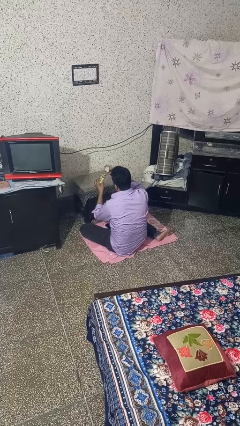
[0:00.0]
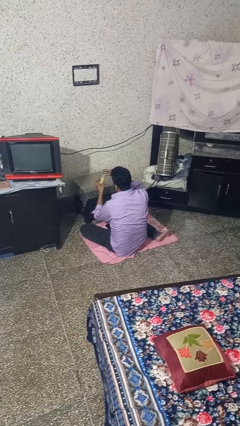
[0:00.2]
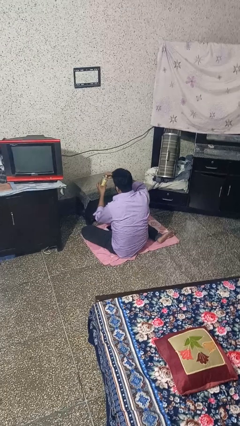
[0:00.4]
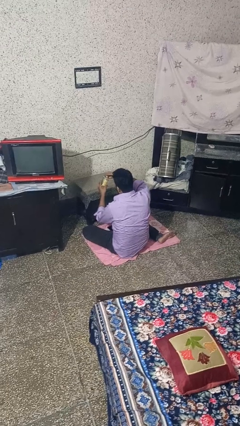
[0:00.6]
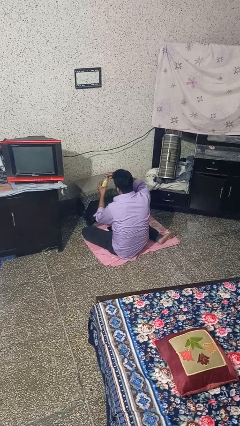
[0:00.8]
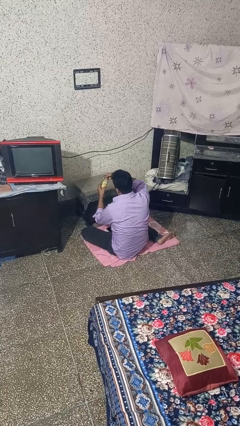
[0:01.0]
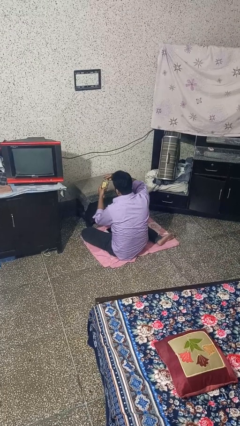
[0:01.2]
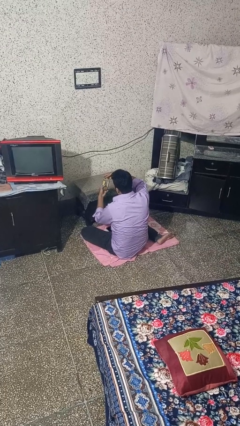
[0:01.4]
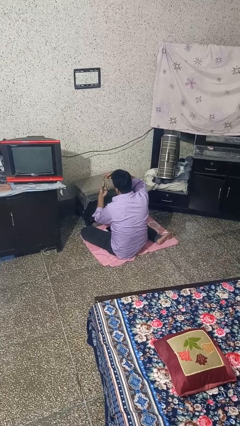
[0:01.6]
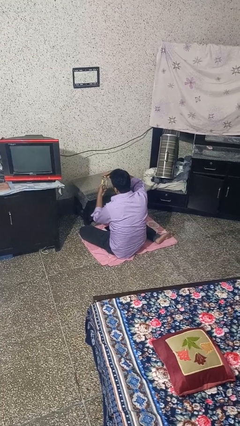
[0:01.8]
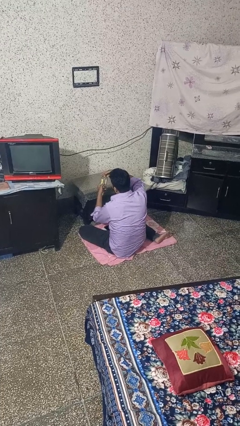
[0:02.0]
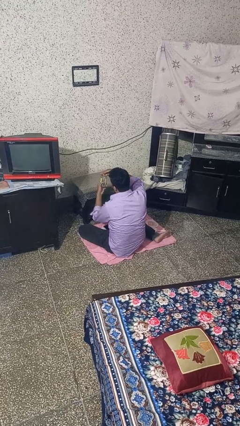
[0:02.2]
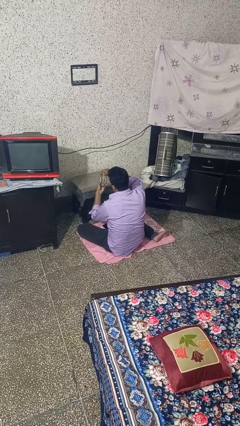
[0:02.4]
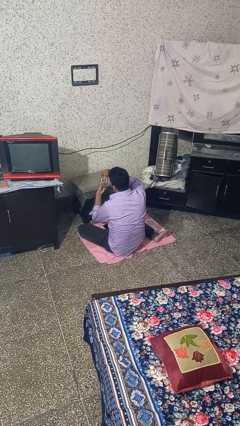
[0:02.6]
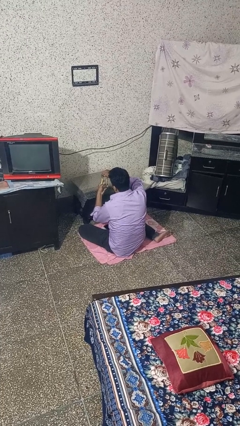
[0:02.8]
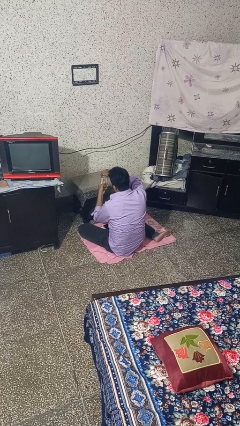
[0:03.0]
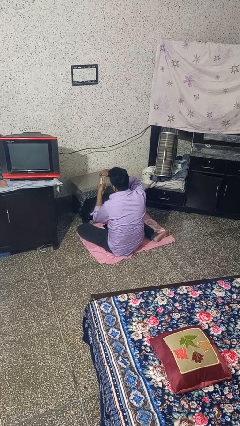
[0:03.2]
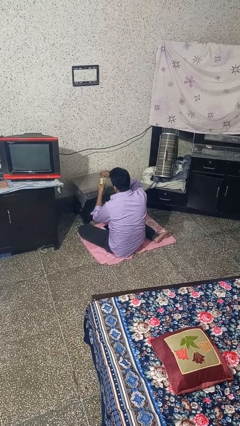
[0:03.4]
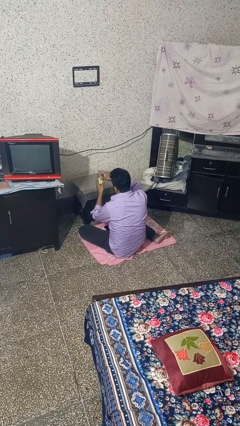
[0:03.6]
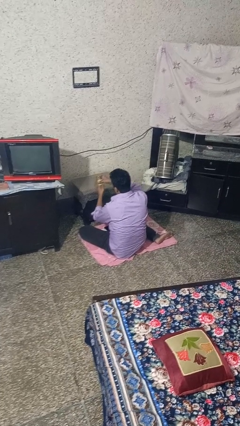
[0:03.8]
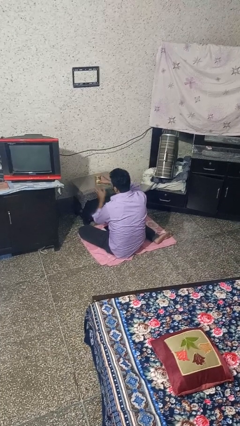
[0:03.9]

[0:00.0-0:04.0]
person closes jar

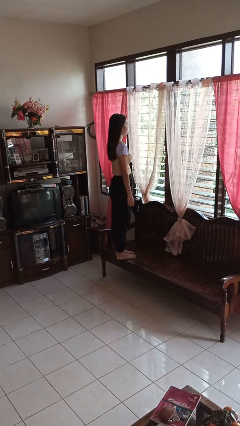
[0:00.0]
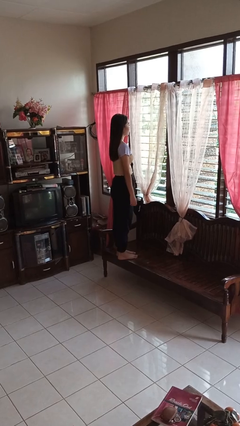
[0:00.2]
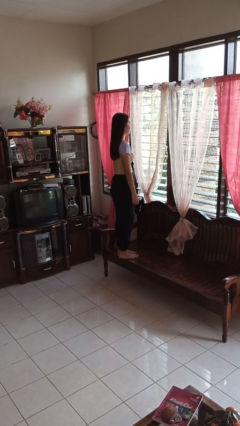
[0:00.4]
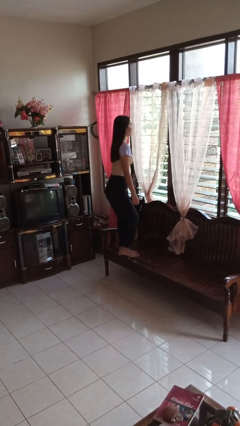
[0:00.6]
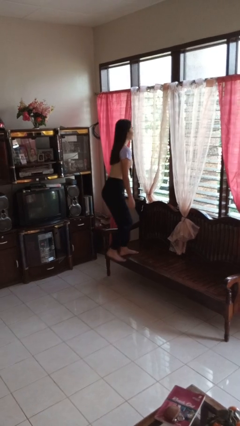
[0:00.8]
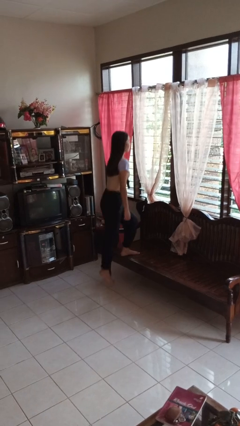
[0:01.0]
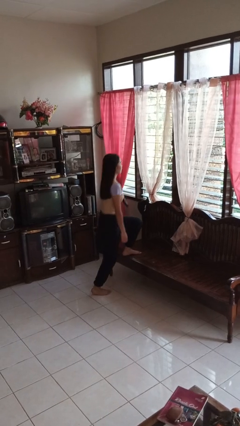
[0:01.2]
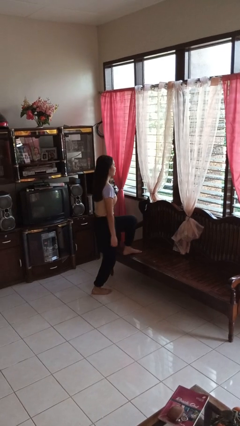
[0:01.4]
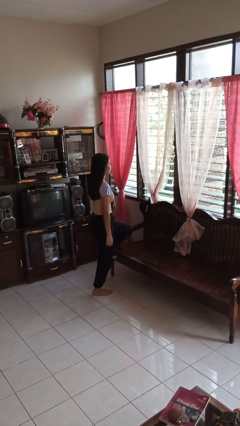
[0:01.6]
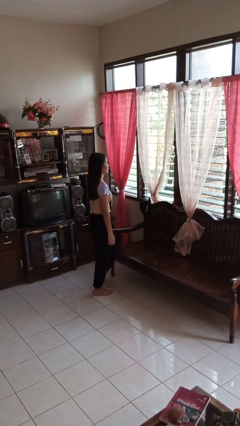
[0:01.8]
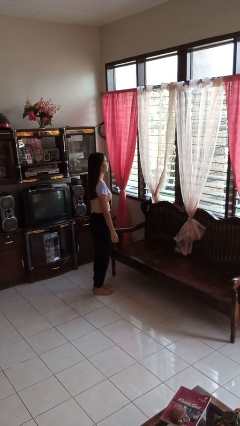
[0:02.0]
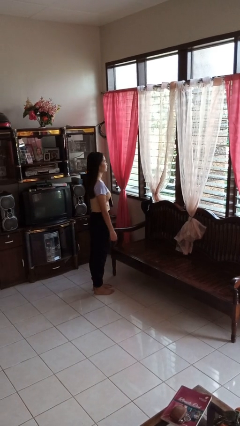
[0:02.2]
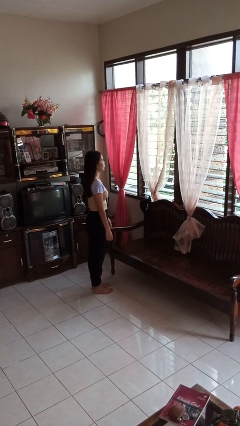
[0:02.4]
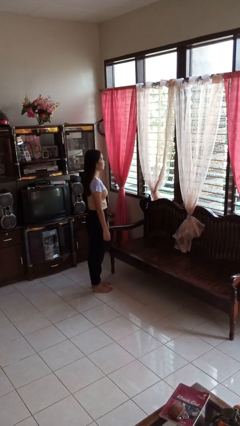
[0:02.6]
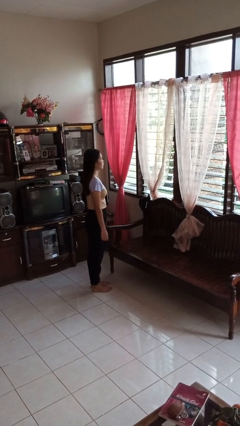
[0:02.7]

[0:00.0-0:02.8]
person climbs off couch

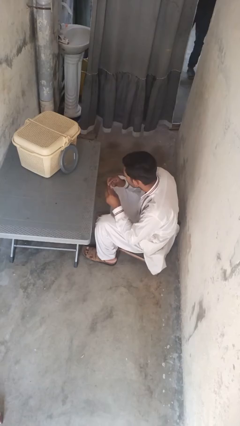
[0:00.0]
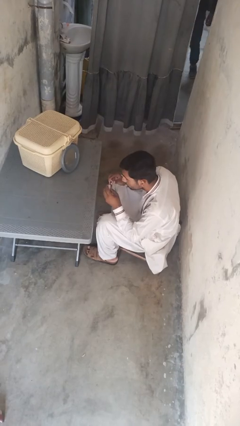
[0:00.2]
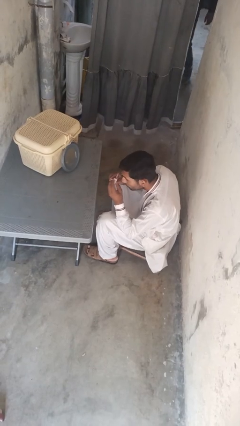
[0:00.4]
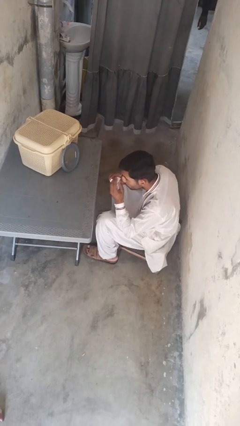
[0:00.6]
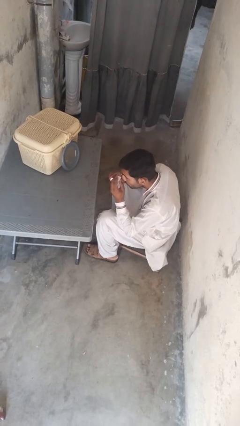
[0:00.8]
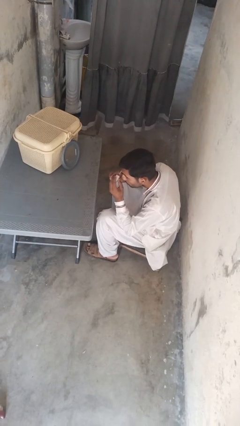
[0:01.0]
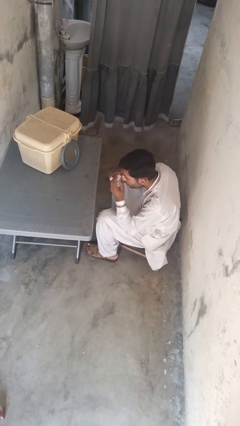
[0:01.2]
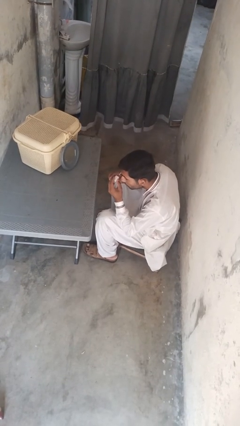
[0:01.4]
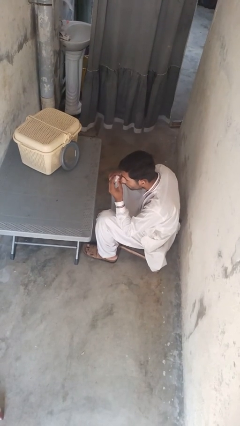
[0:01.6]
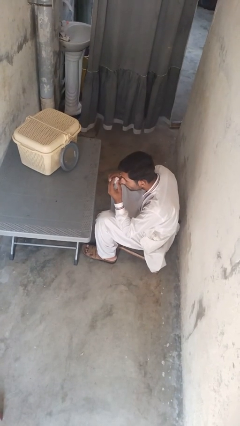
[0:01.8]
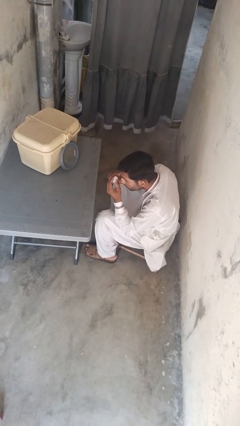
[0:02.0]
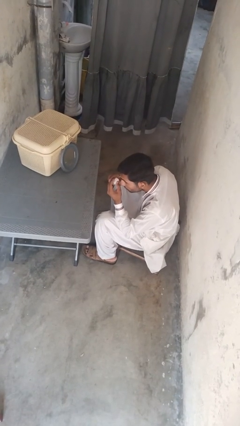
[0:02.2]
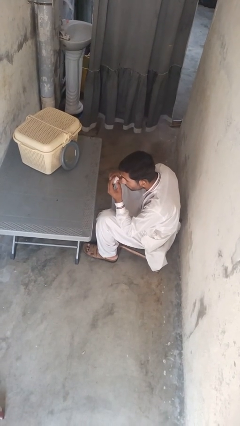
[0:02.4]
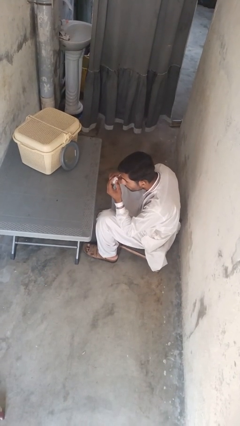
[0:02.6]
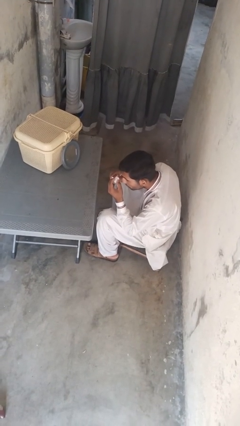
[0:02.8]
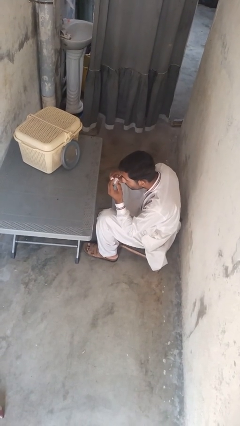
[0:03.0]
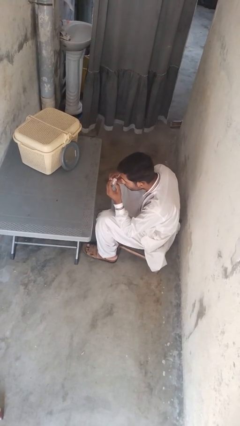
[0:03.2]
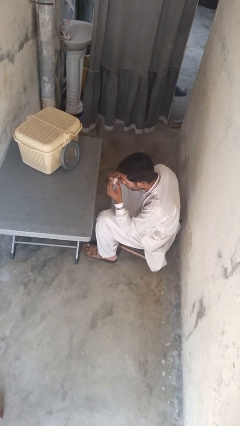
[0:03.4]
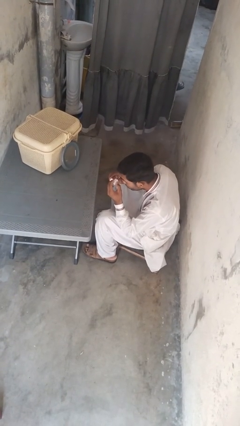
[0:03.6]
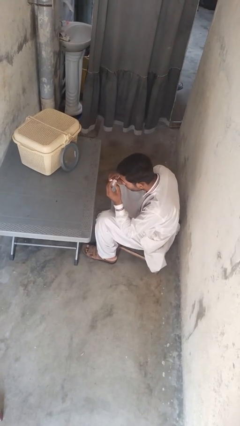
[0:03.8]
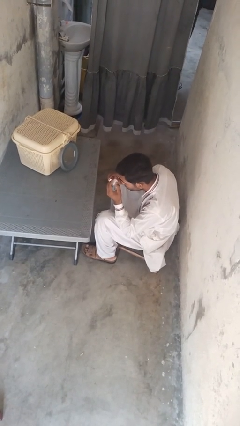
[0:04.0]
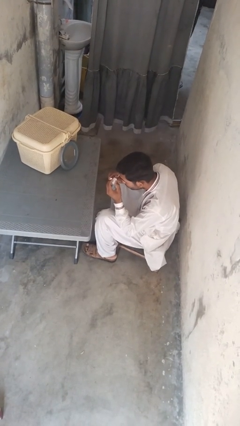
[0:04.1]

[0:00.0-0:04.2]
person applies eye makeup

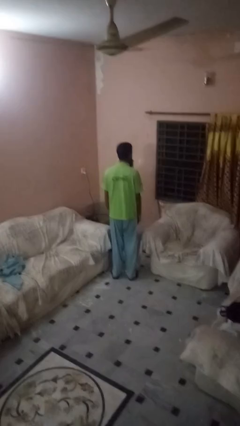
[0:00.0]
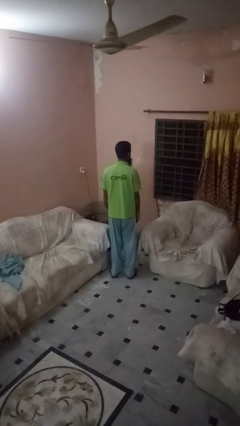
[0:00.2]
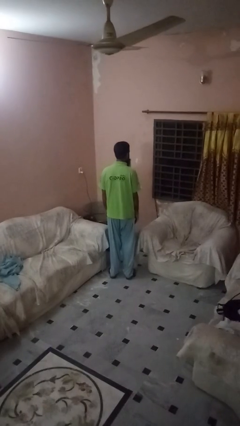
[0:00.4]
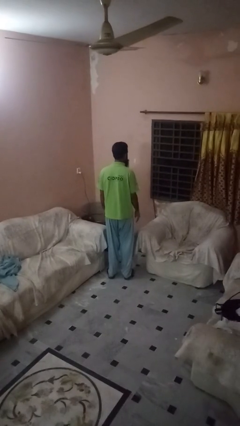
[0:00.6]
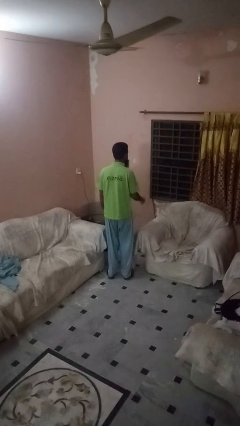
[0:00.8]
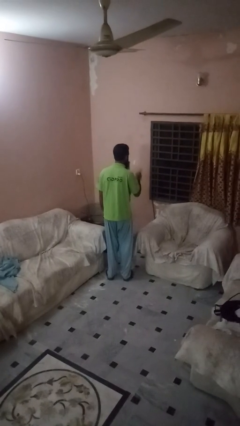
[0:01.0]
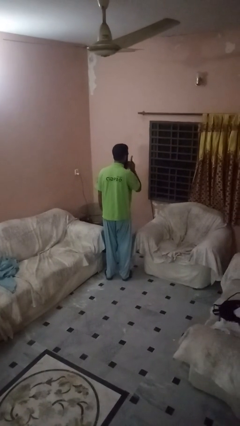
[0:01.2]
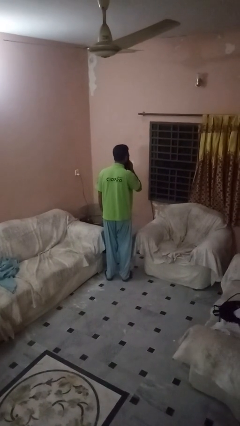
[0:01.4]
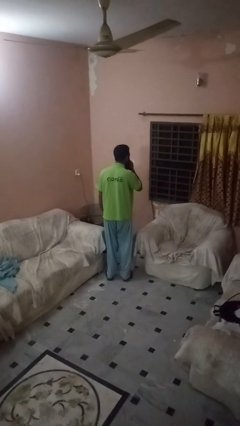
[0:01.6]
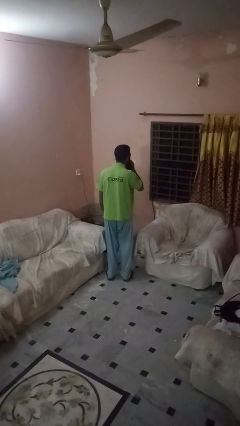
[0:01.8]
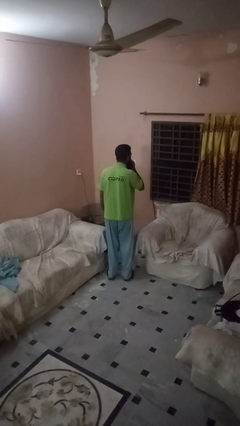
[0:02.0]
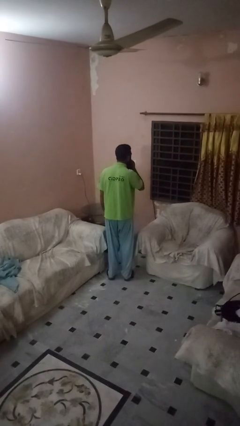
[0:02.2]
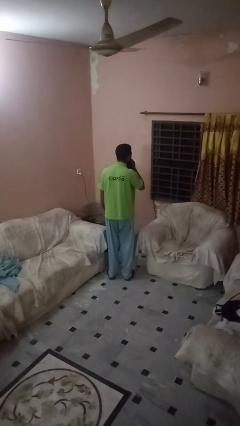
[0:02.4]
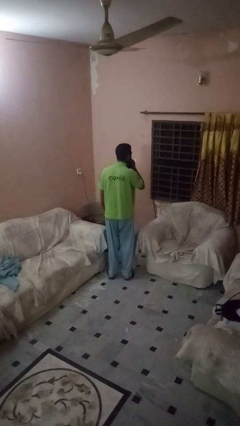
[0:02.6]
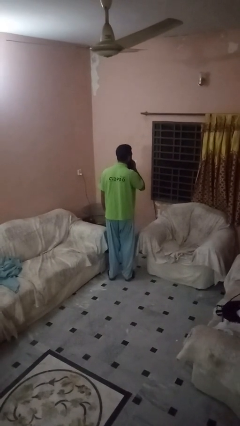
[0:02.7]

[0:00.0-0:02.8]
person gestures be quiet

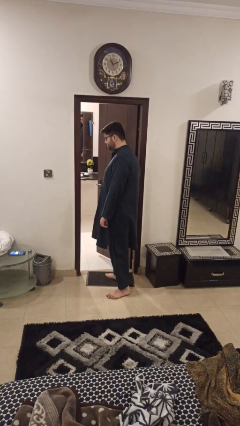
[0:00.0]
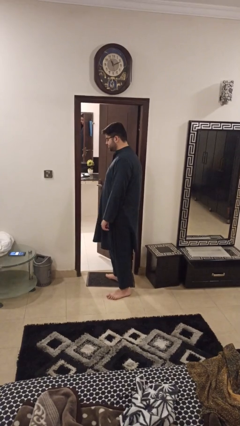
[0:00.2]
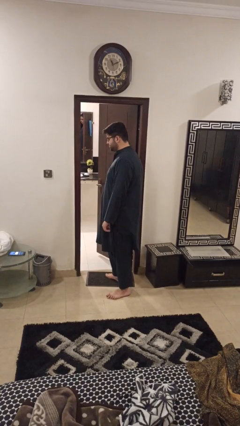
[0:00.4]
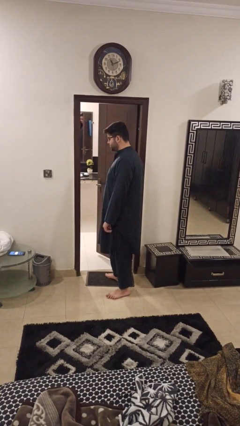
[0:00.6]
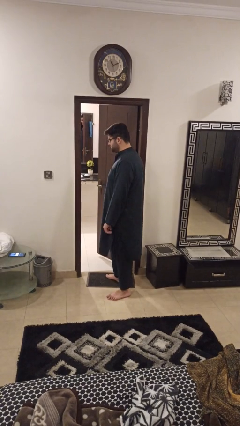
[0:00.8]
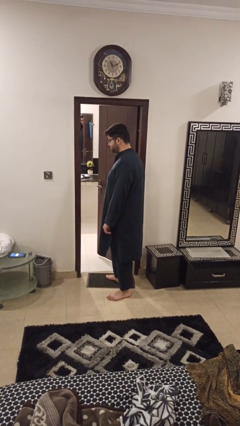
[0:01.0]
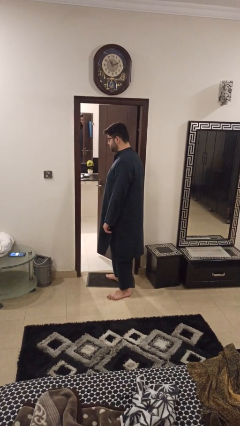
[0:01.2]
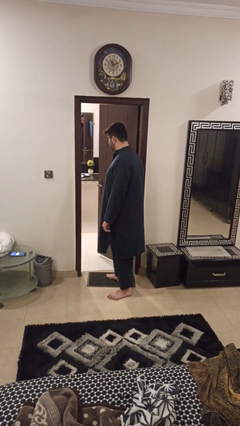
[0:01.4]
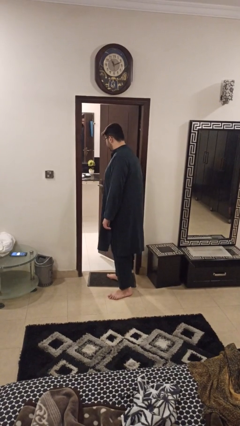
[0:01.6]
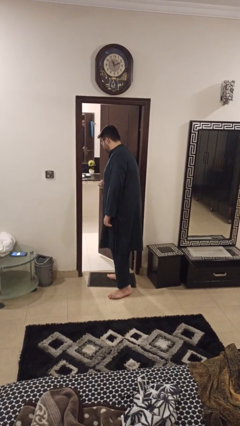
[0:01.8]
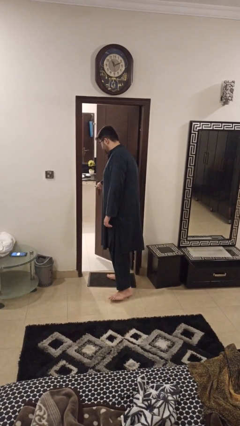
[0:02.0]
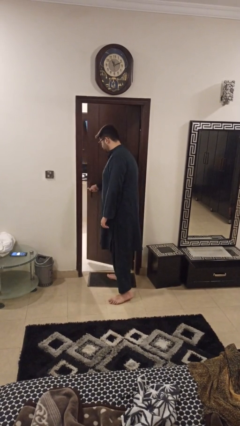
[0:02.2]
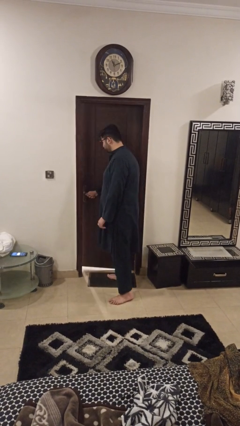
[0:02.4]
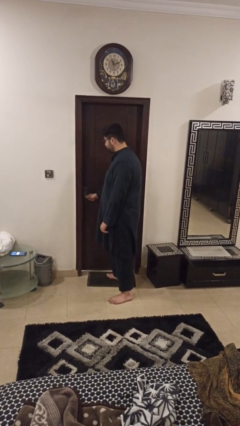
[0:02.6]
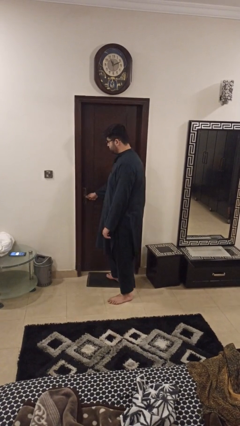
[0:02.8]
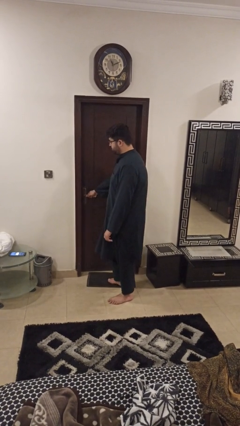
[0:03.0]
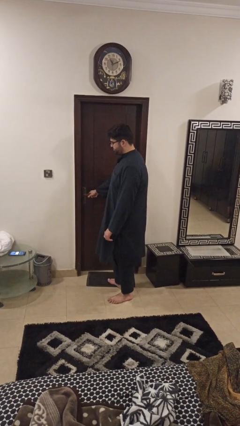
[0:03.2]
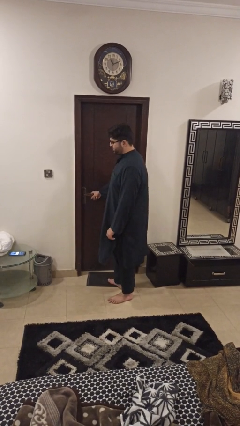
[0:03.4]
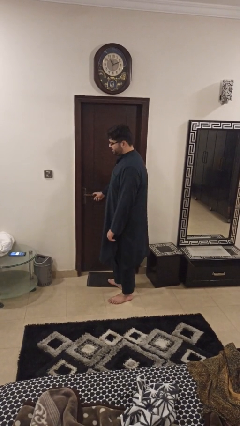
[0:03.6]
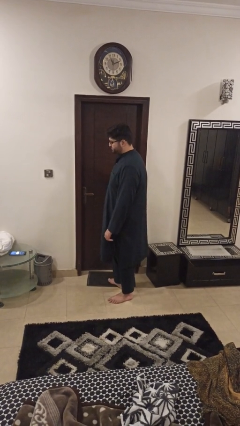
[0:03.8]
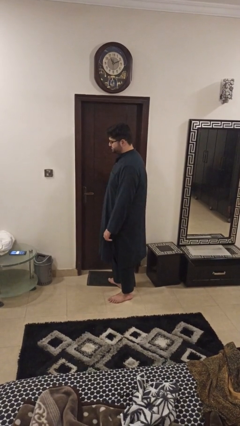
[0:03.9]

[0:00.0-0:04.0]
person closes facility door
